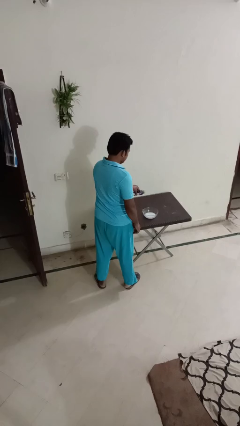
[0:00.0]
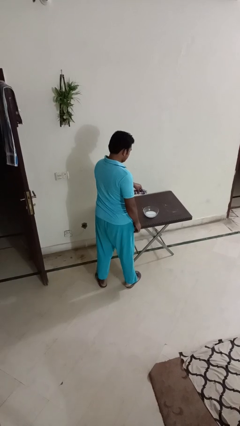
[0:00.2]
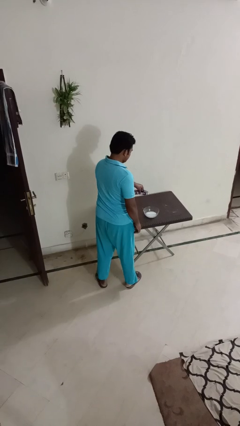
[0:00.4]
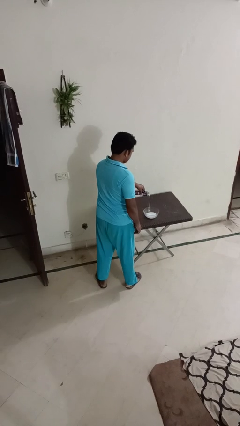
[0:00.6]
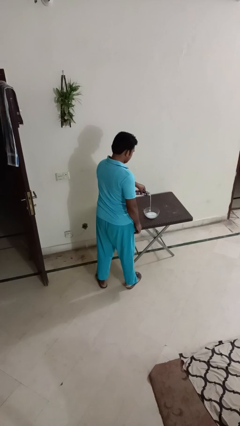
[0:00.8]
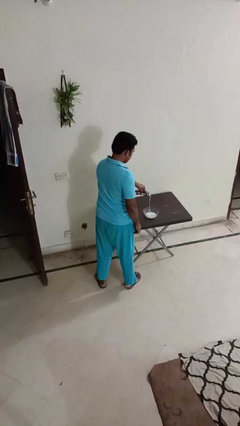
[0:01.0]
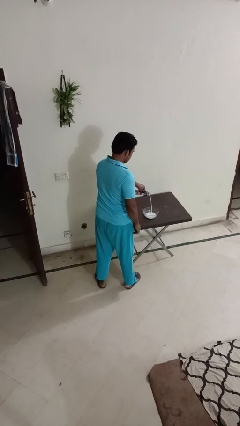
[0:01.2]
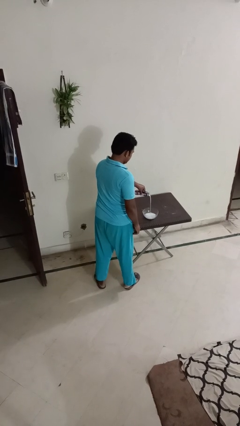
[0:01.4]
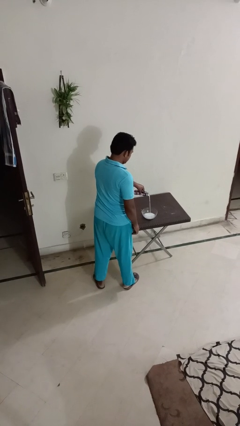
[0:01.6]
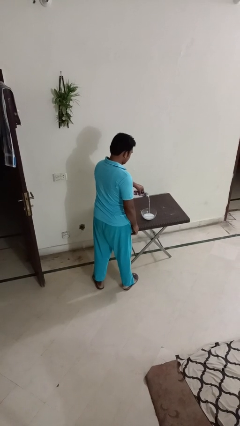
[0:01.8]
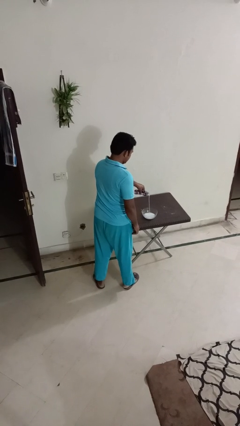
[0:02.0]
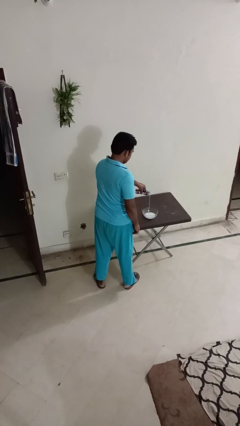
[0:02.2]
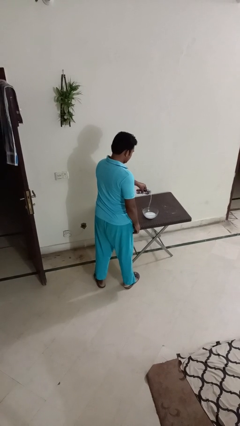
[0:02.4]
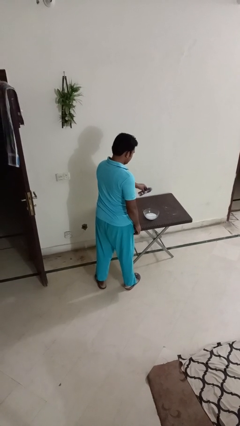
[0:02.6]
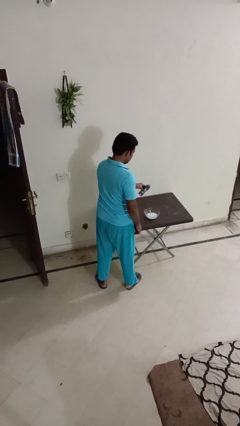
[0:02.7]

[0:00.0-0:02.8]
person pours into bowl

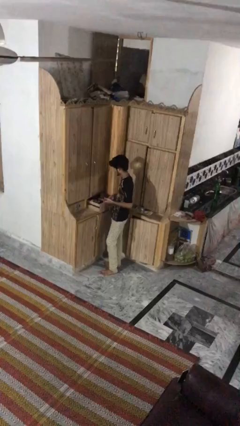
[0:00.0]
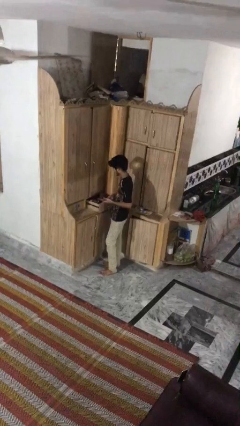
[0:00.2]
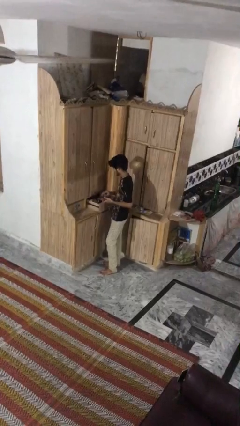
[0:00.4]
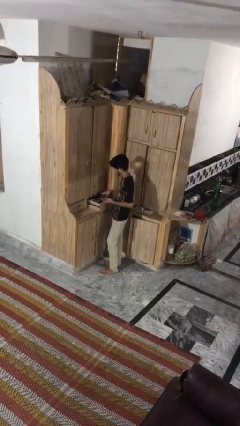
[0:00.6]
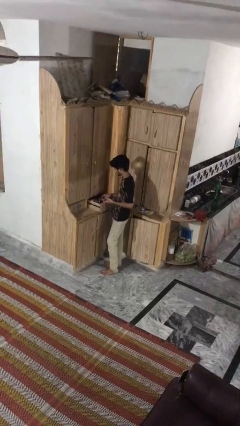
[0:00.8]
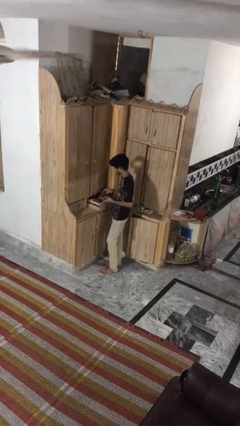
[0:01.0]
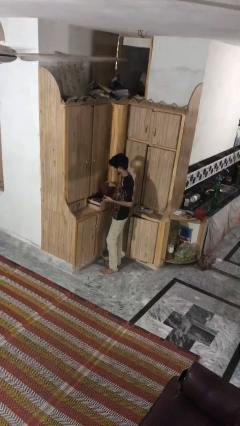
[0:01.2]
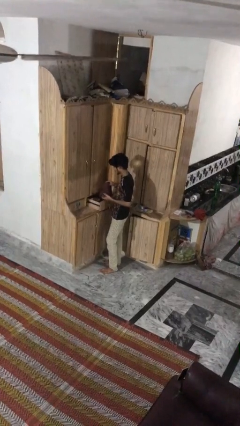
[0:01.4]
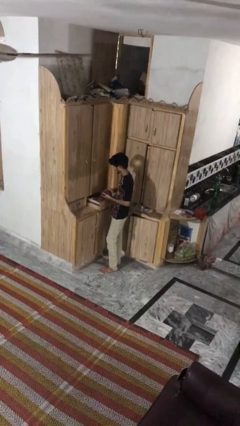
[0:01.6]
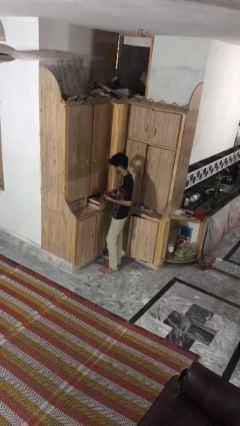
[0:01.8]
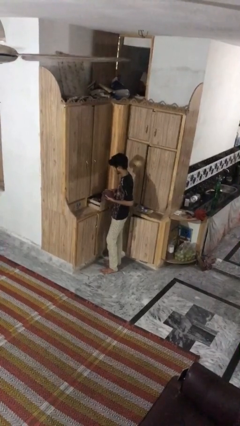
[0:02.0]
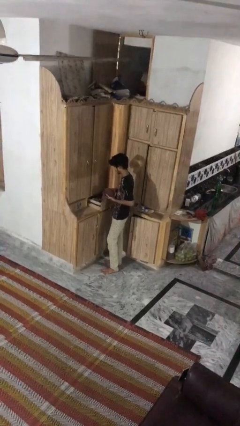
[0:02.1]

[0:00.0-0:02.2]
person takes clothes from dresser

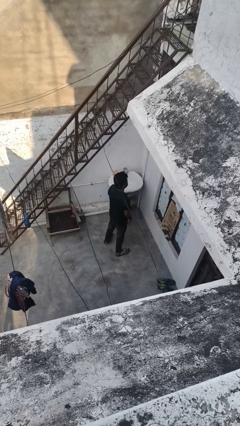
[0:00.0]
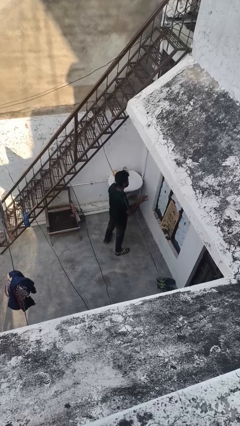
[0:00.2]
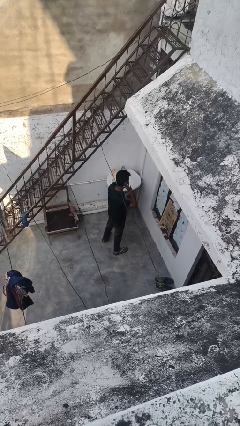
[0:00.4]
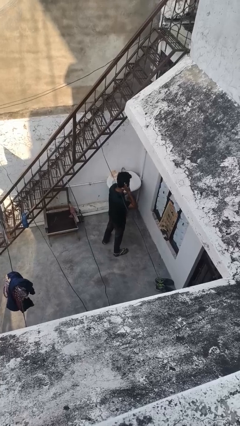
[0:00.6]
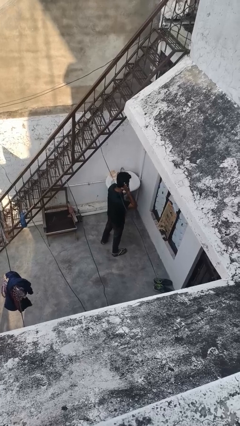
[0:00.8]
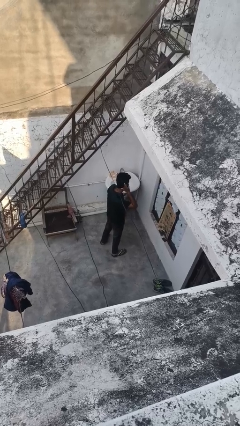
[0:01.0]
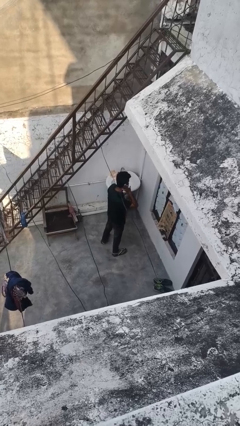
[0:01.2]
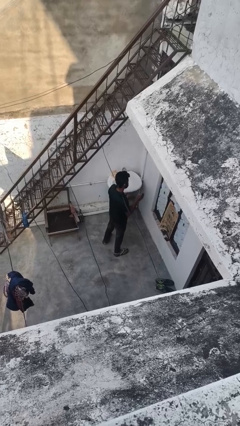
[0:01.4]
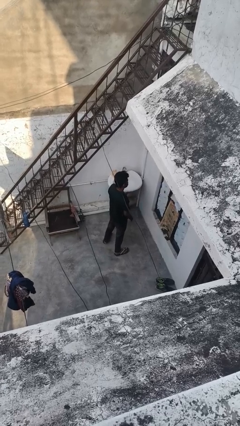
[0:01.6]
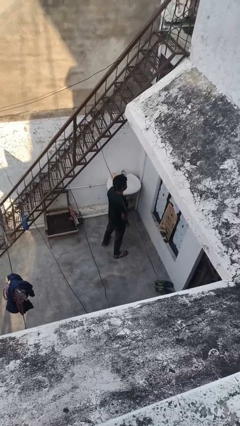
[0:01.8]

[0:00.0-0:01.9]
person gestures listen closely

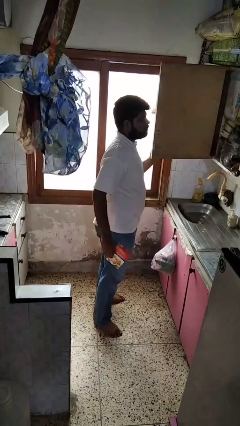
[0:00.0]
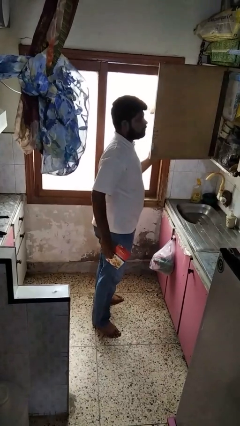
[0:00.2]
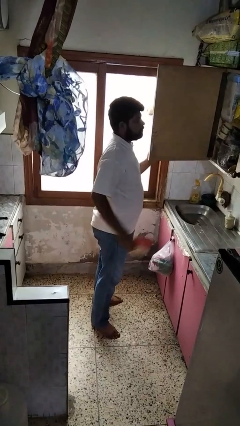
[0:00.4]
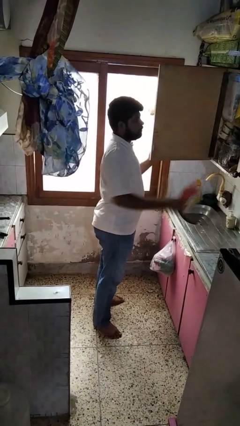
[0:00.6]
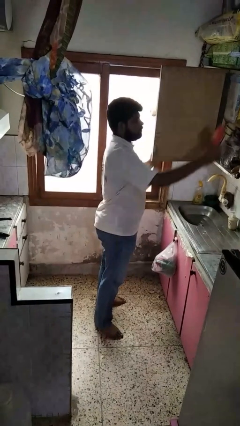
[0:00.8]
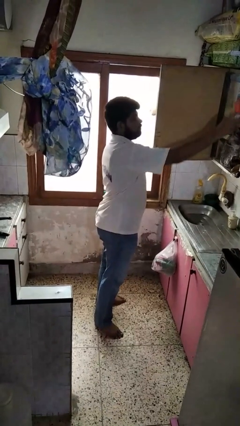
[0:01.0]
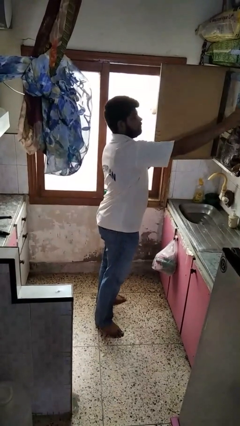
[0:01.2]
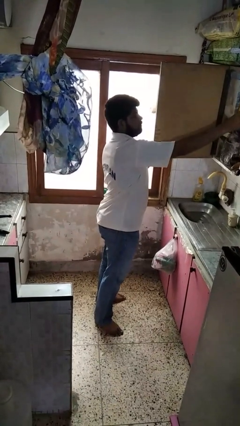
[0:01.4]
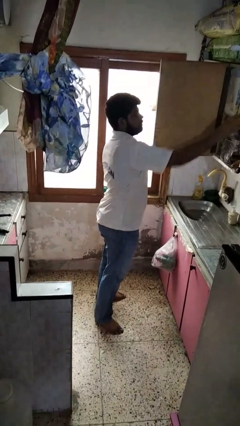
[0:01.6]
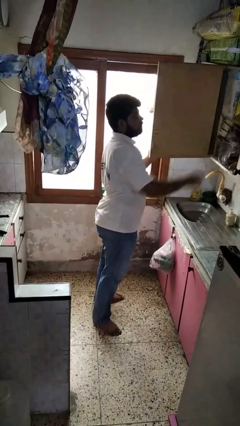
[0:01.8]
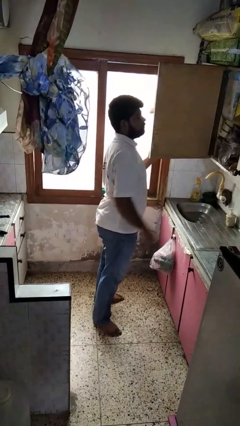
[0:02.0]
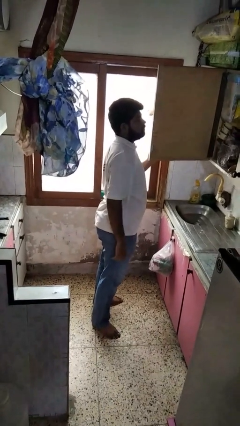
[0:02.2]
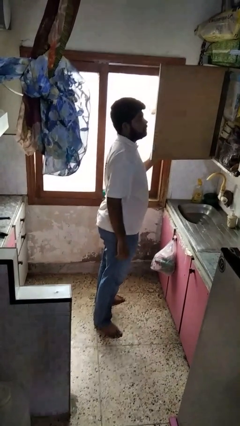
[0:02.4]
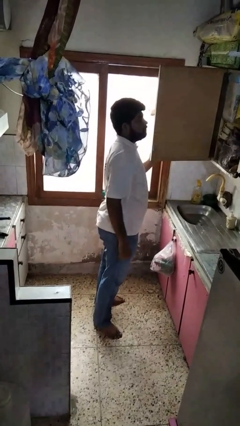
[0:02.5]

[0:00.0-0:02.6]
person puts down object into cabinet

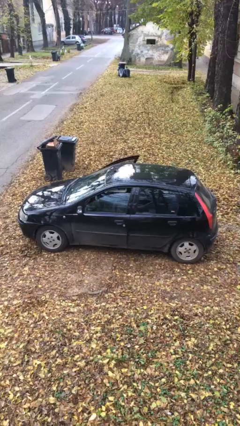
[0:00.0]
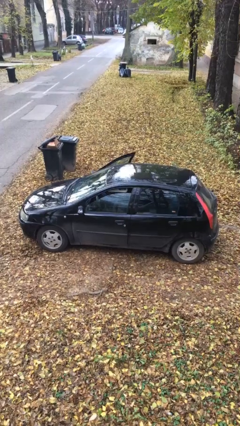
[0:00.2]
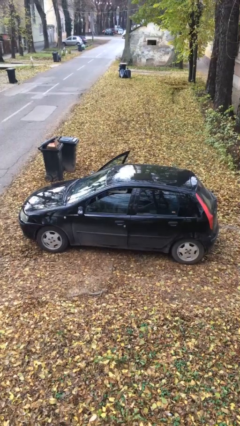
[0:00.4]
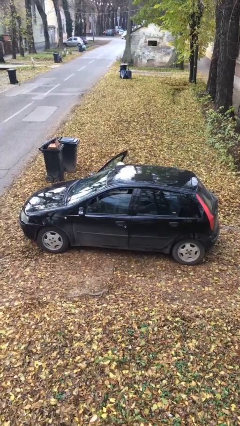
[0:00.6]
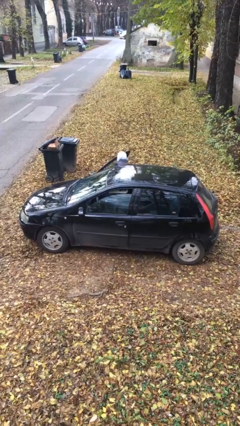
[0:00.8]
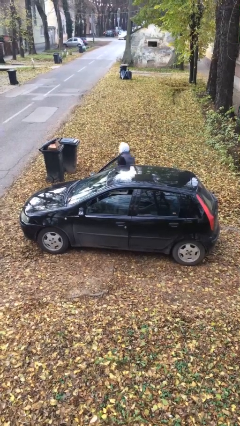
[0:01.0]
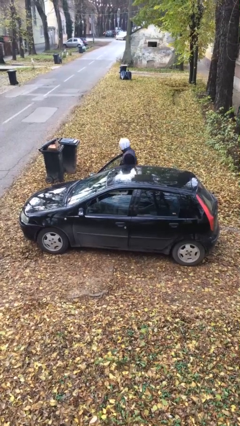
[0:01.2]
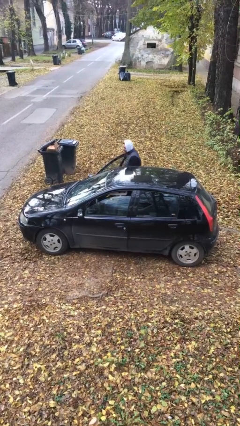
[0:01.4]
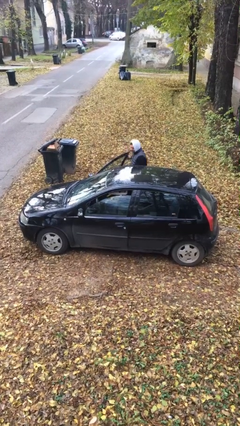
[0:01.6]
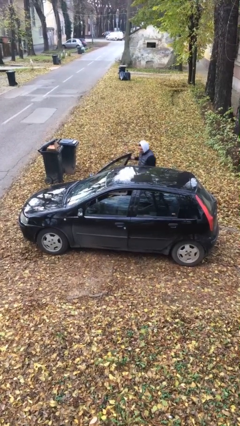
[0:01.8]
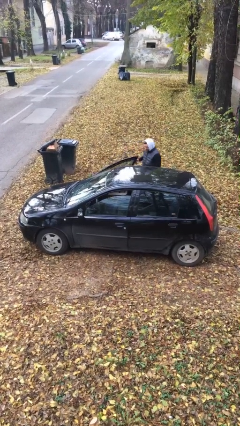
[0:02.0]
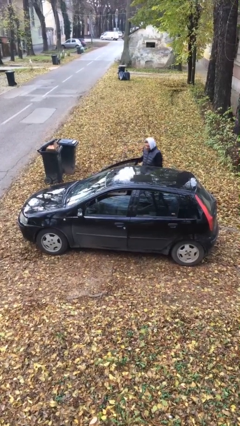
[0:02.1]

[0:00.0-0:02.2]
car drops off person

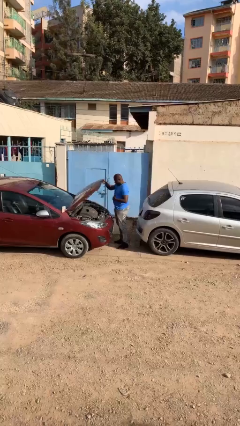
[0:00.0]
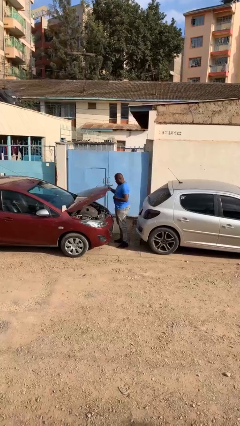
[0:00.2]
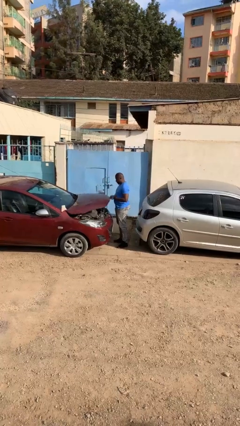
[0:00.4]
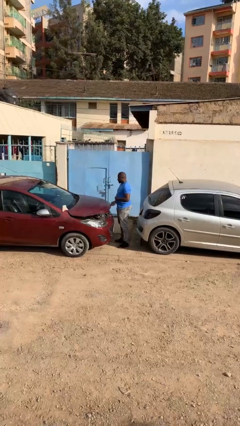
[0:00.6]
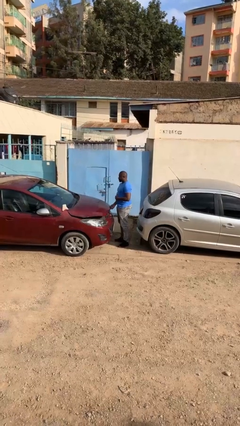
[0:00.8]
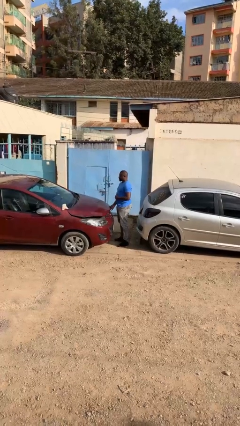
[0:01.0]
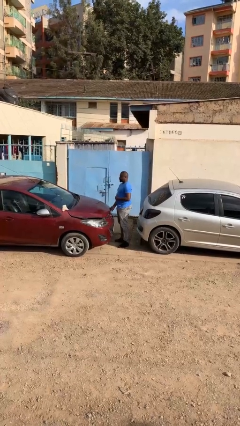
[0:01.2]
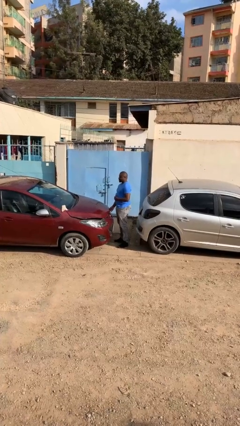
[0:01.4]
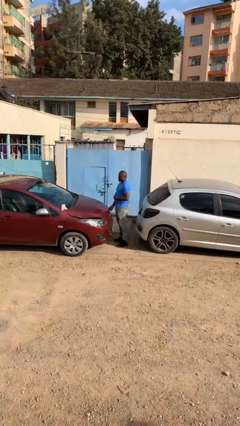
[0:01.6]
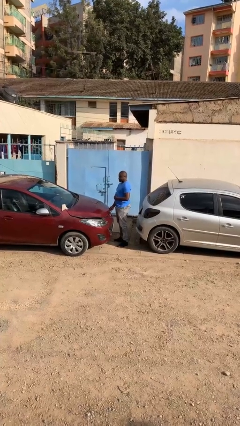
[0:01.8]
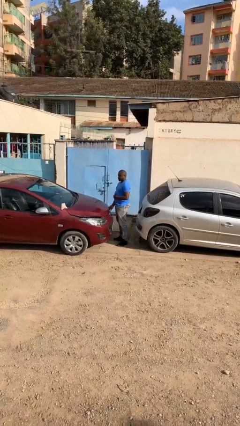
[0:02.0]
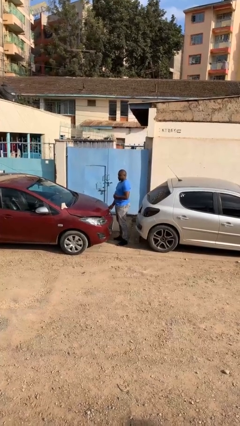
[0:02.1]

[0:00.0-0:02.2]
person closes car hood

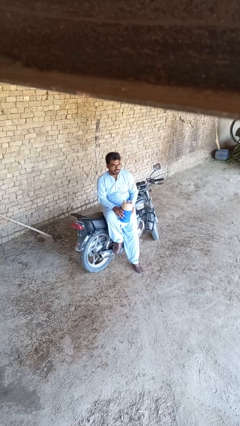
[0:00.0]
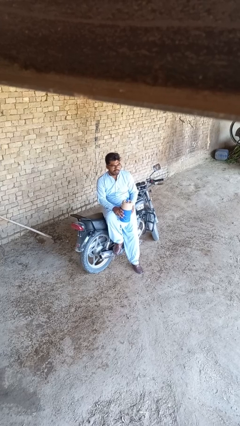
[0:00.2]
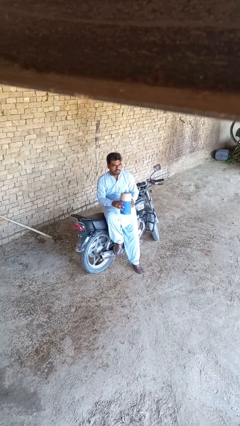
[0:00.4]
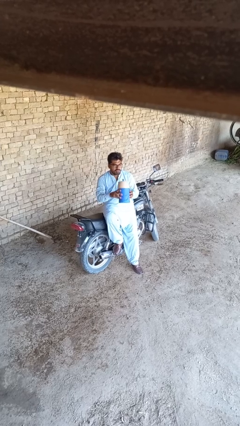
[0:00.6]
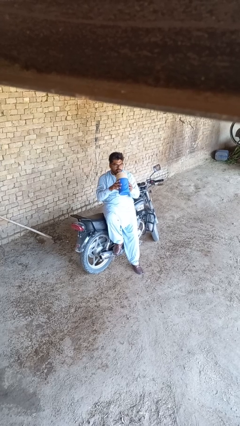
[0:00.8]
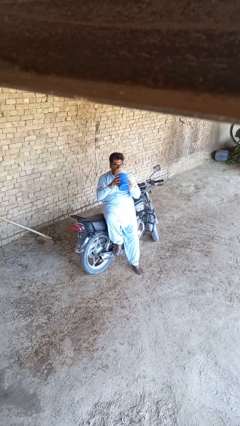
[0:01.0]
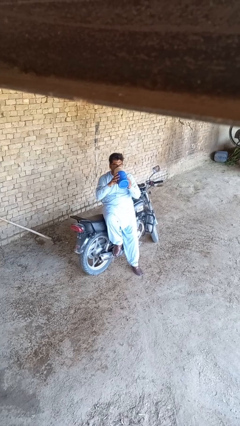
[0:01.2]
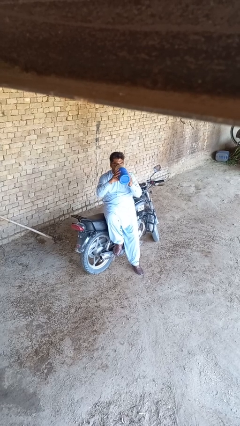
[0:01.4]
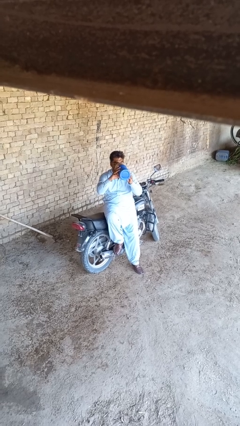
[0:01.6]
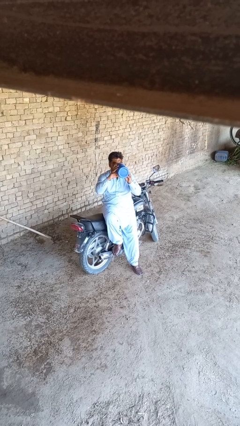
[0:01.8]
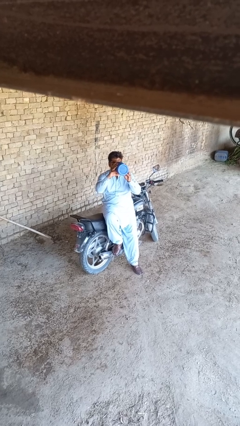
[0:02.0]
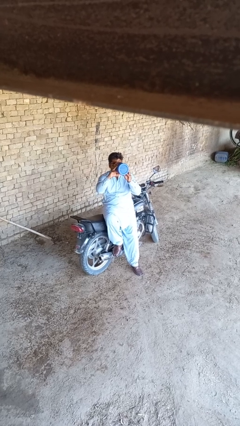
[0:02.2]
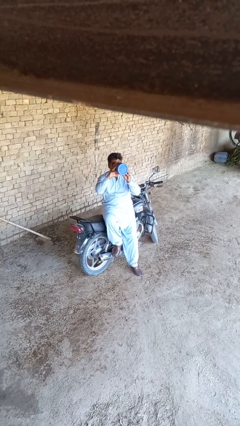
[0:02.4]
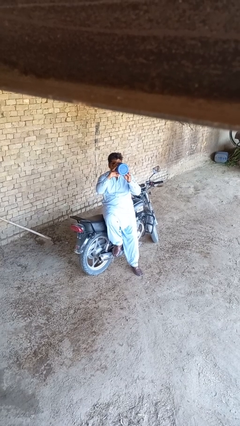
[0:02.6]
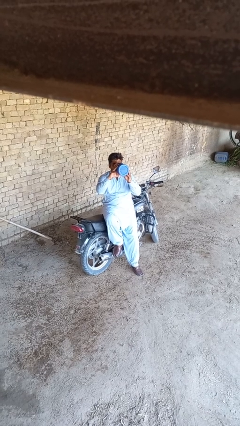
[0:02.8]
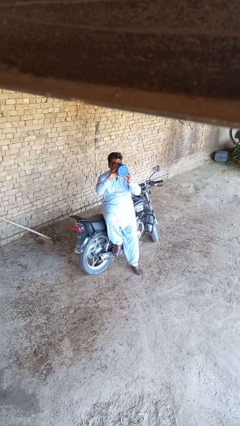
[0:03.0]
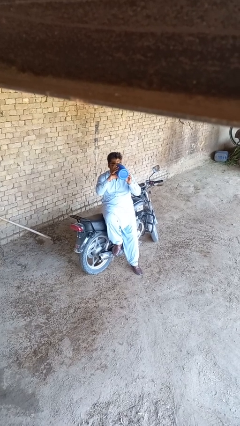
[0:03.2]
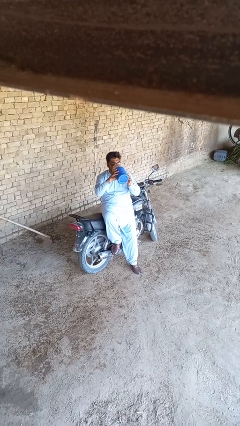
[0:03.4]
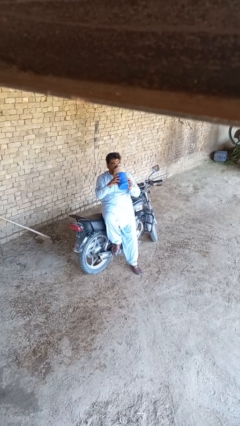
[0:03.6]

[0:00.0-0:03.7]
person drinks from bottle
